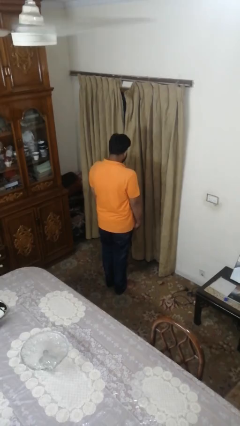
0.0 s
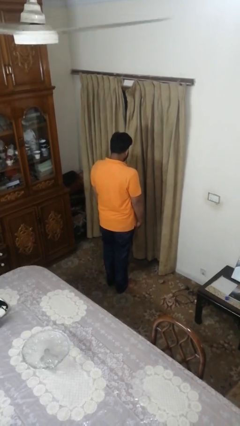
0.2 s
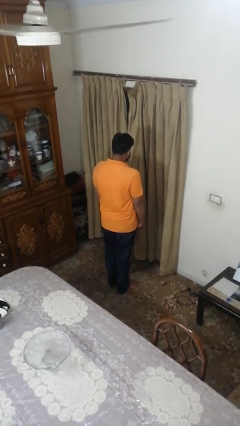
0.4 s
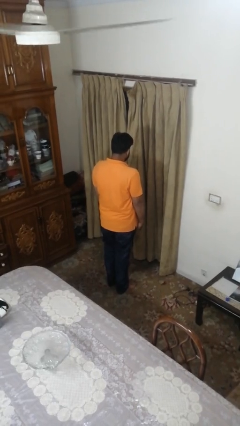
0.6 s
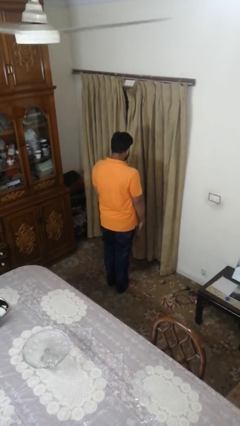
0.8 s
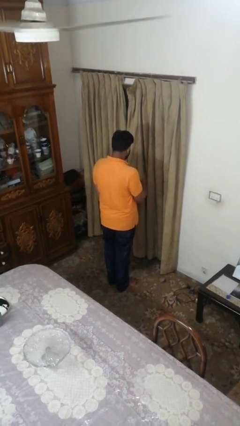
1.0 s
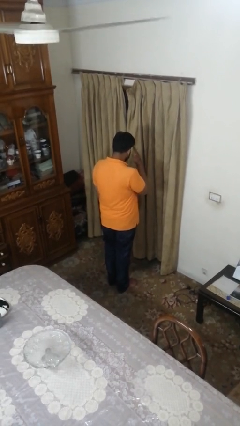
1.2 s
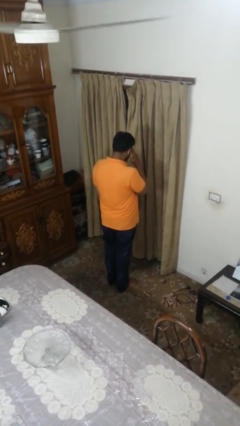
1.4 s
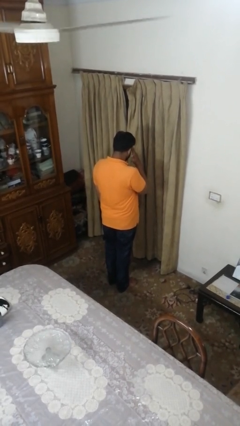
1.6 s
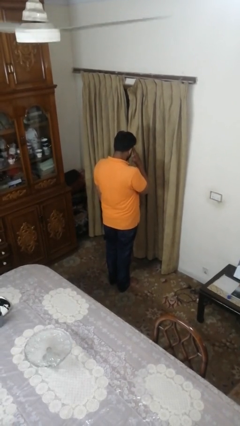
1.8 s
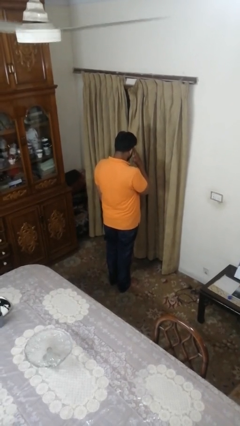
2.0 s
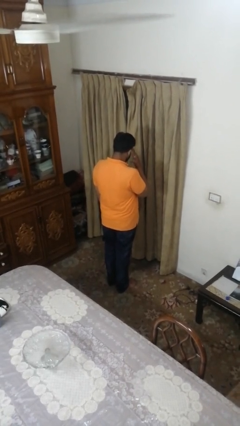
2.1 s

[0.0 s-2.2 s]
person salutes

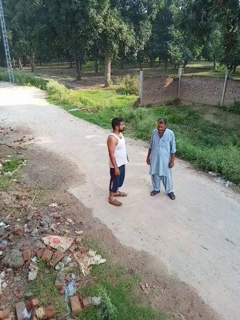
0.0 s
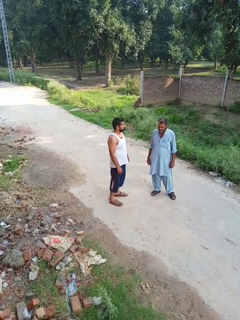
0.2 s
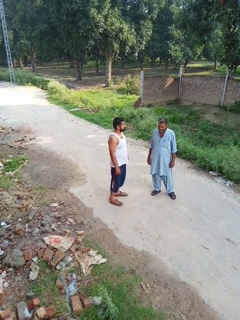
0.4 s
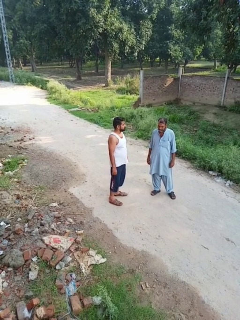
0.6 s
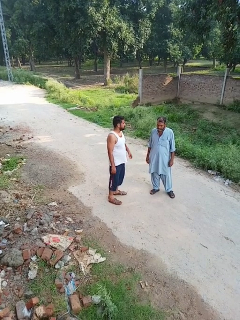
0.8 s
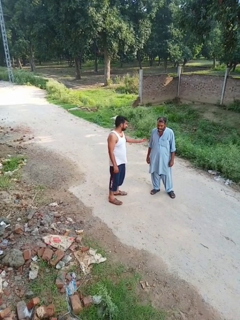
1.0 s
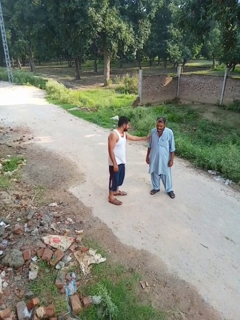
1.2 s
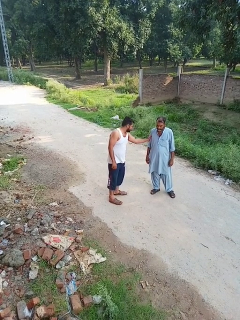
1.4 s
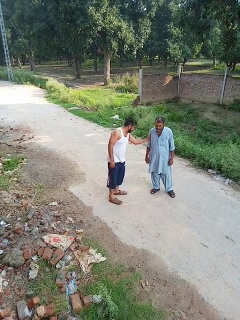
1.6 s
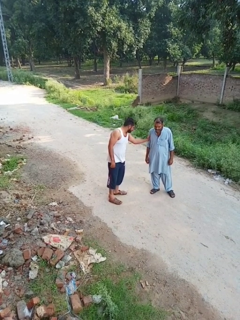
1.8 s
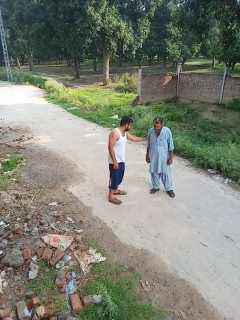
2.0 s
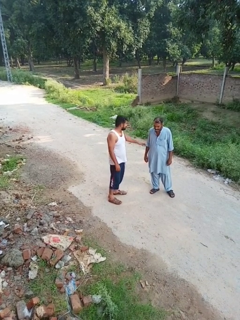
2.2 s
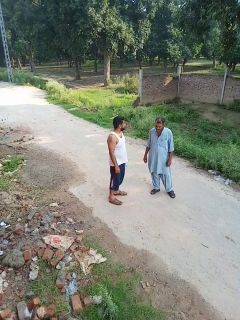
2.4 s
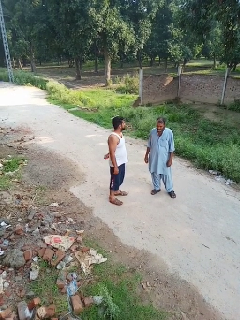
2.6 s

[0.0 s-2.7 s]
person grabs person by forearm

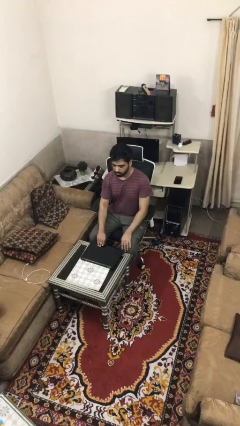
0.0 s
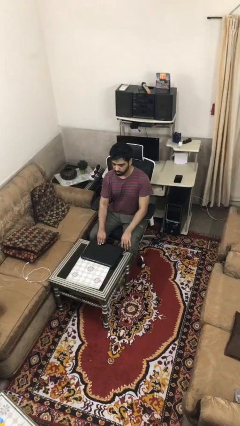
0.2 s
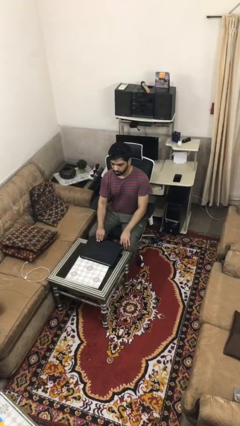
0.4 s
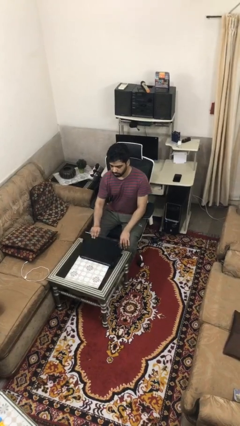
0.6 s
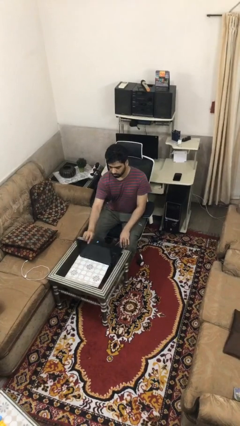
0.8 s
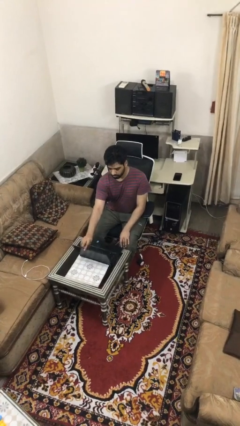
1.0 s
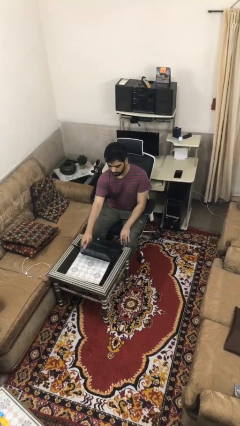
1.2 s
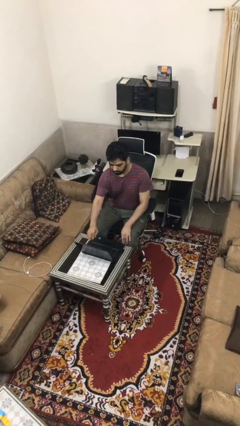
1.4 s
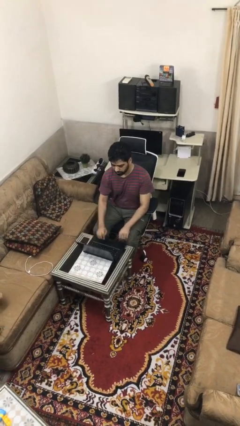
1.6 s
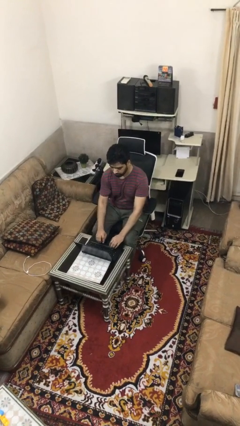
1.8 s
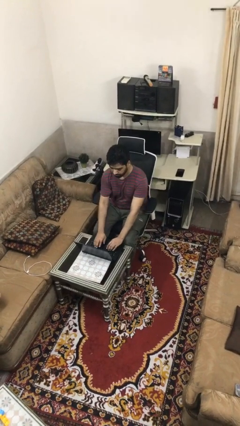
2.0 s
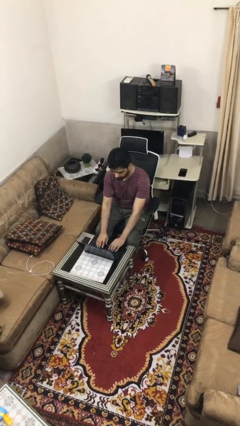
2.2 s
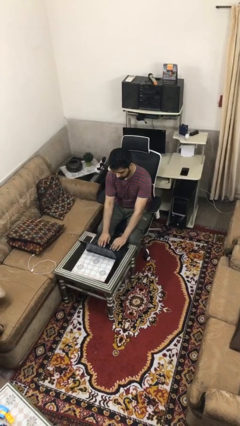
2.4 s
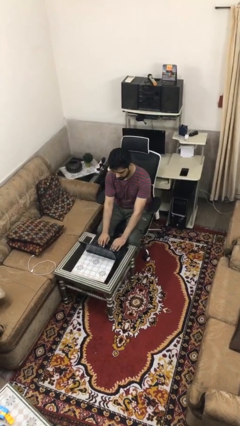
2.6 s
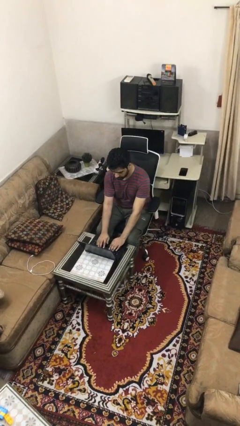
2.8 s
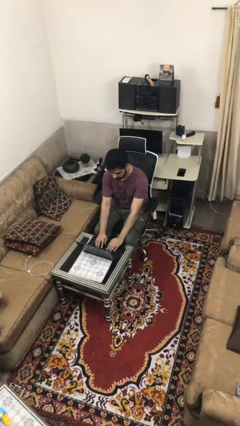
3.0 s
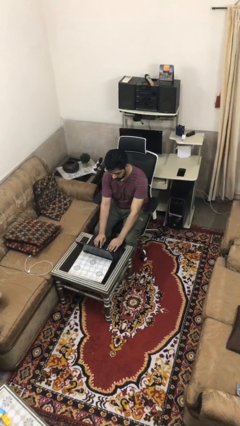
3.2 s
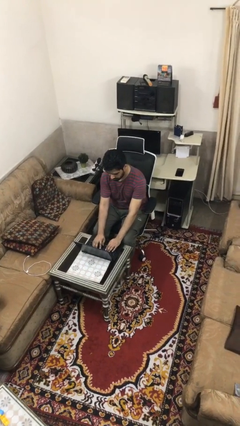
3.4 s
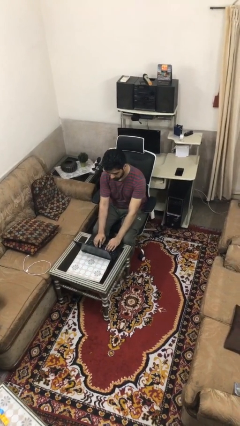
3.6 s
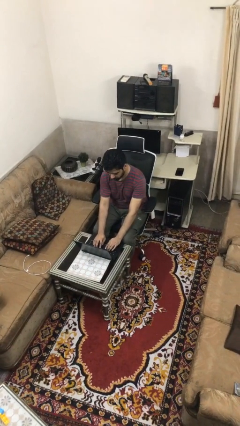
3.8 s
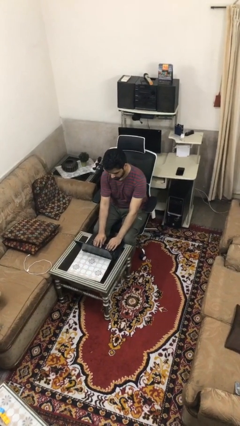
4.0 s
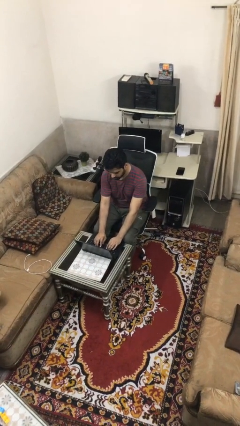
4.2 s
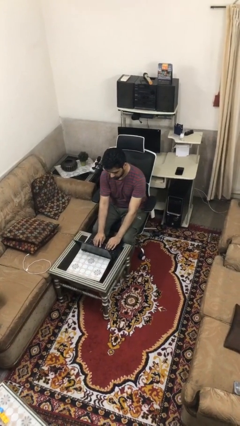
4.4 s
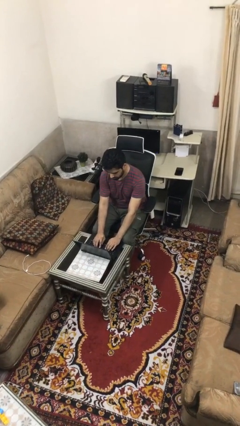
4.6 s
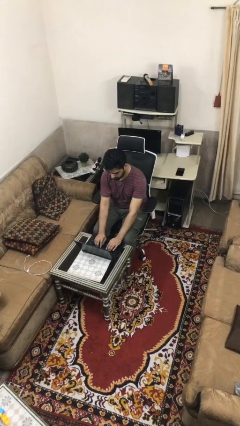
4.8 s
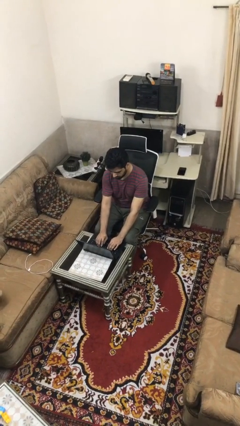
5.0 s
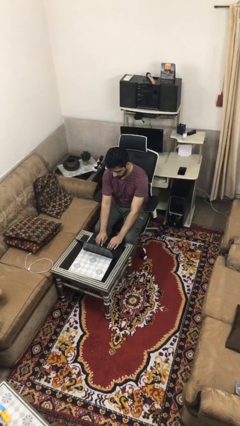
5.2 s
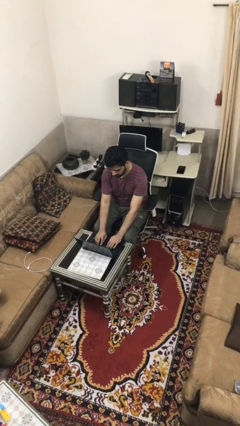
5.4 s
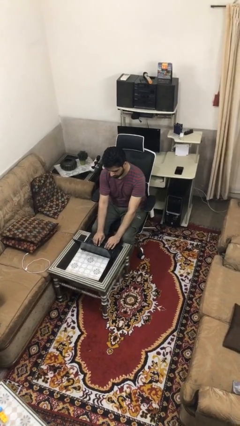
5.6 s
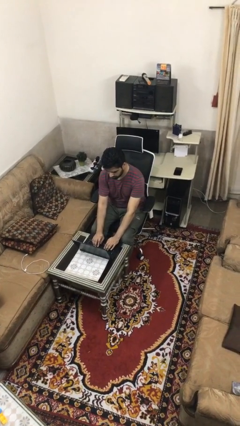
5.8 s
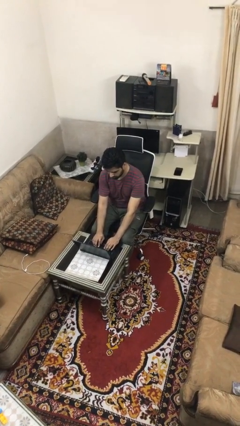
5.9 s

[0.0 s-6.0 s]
person interacts with laptop

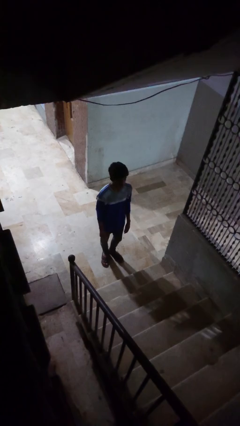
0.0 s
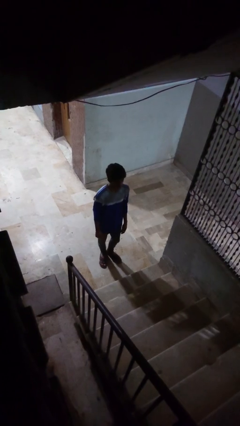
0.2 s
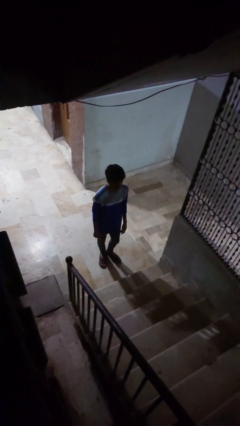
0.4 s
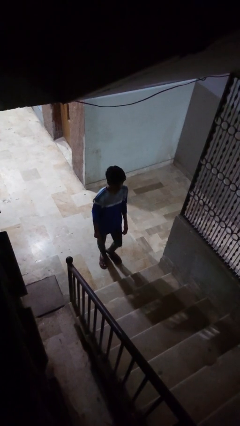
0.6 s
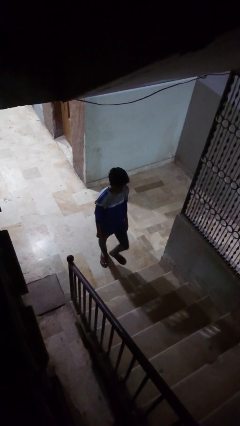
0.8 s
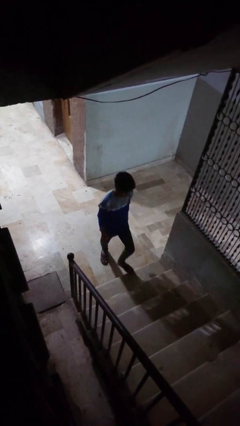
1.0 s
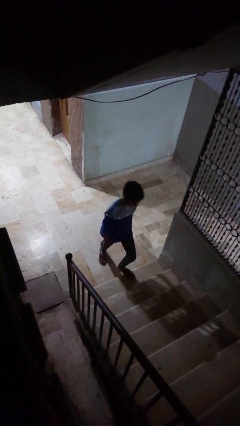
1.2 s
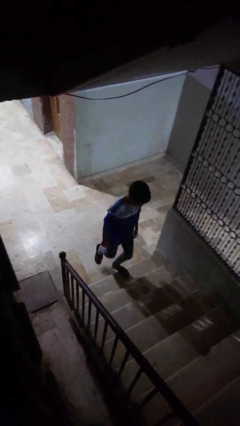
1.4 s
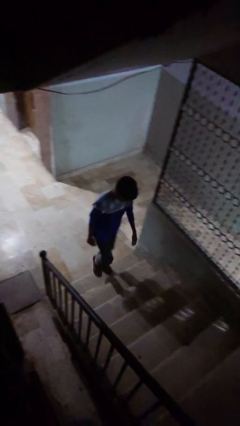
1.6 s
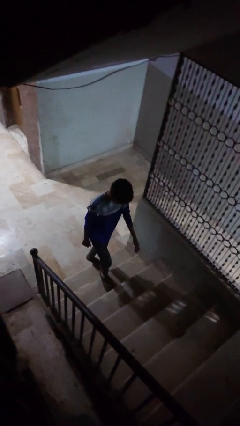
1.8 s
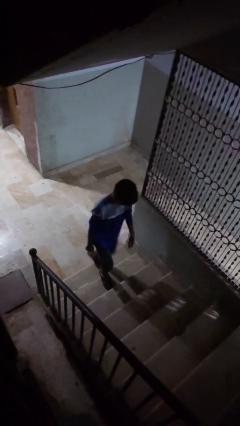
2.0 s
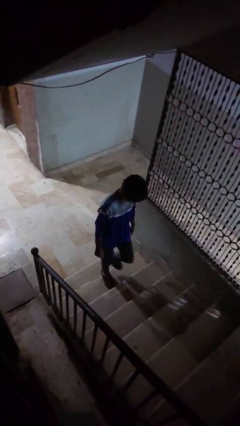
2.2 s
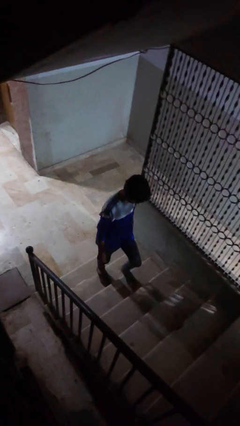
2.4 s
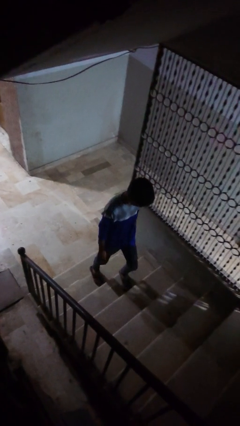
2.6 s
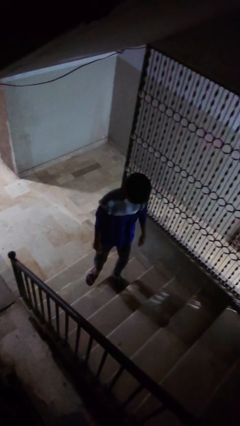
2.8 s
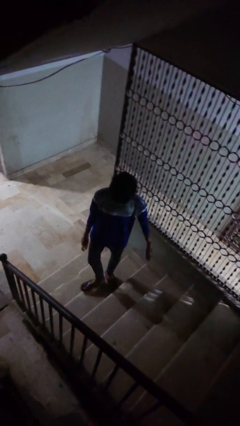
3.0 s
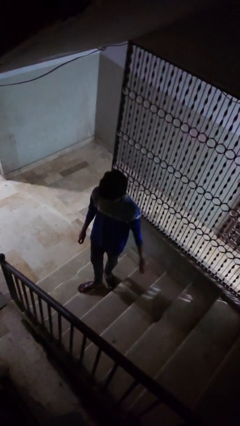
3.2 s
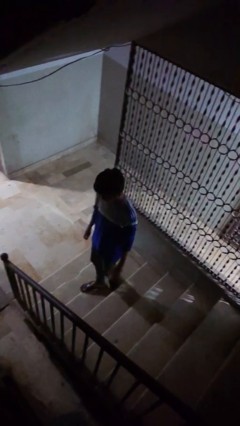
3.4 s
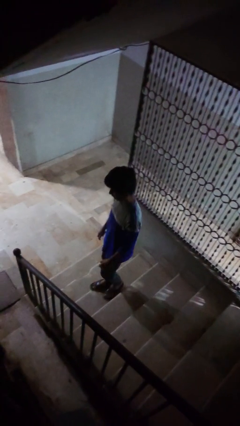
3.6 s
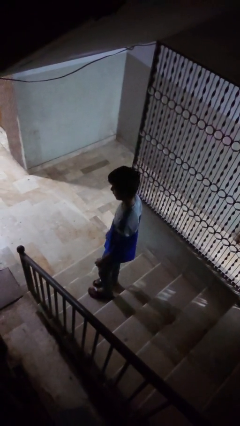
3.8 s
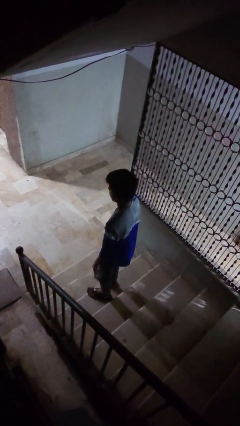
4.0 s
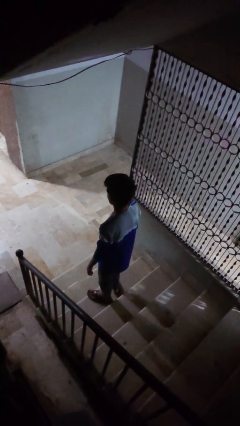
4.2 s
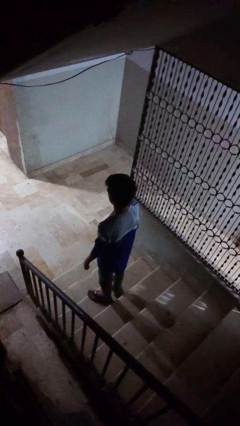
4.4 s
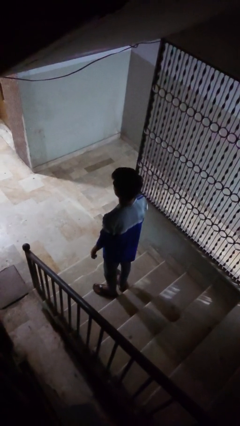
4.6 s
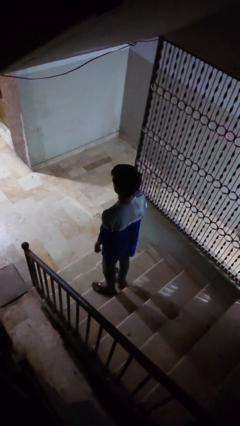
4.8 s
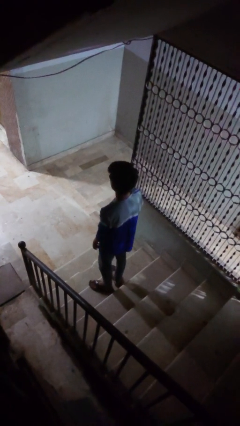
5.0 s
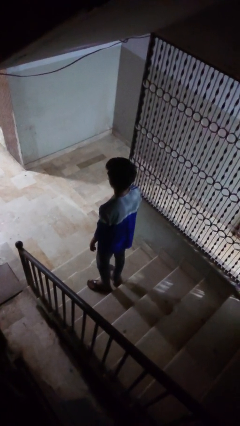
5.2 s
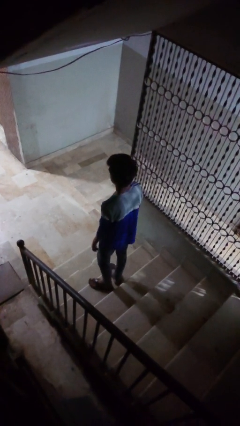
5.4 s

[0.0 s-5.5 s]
person climbs up stairs

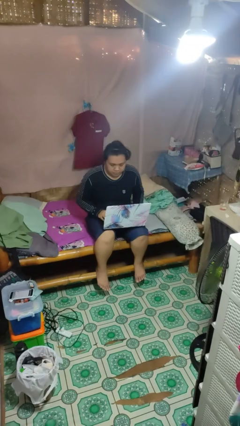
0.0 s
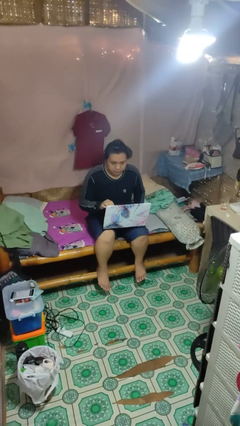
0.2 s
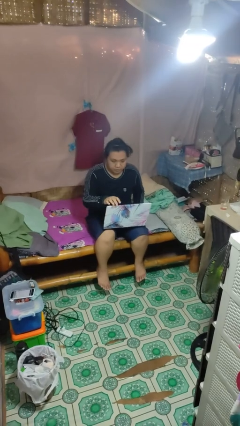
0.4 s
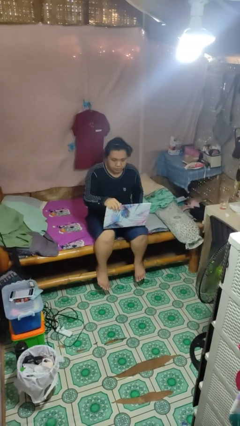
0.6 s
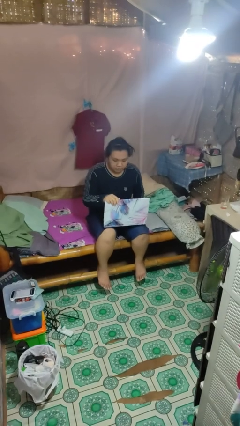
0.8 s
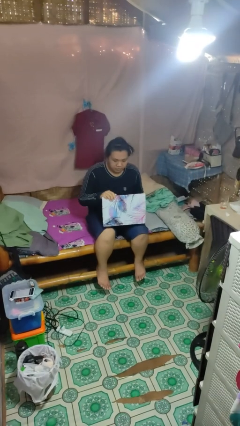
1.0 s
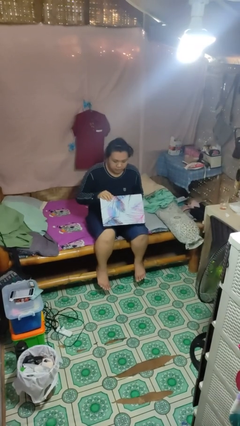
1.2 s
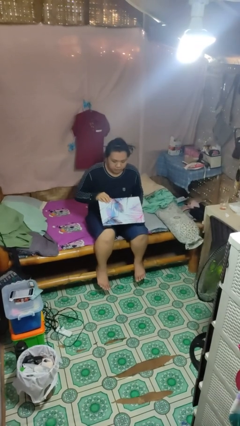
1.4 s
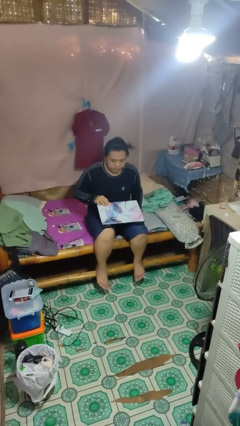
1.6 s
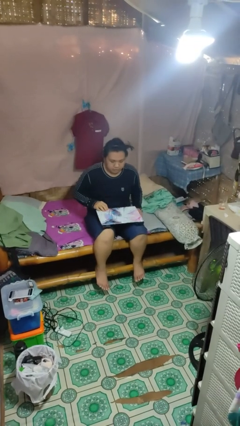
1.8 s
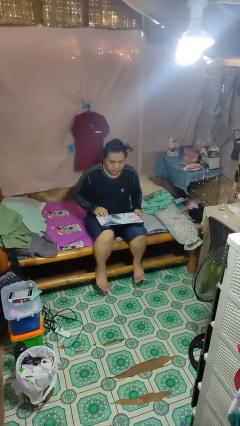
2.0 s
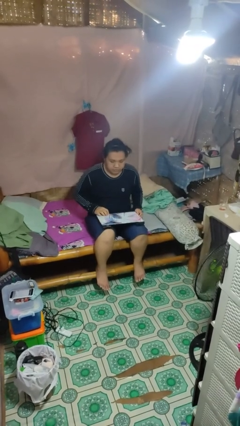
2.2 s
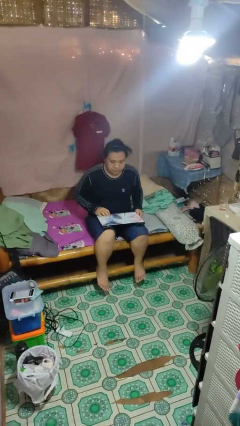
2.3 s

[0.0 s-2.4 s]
person closes laptop
